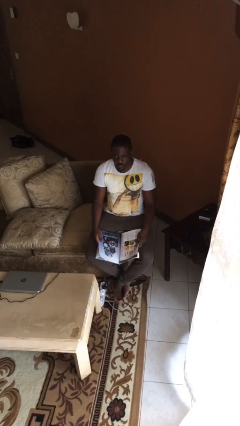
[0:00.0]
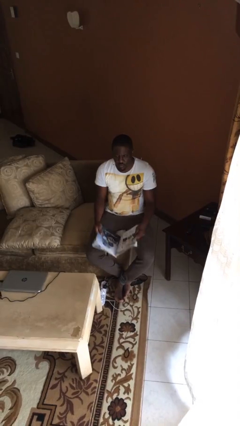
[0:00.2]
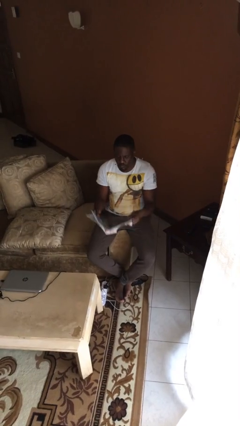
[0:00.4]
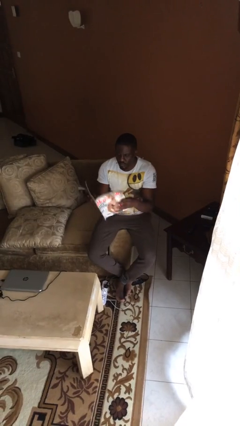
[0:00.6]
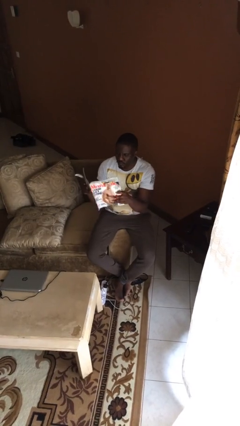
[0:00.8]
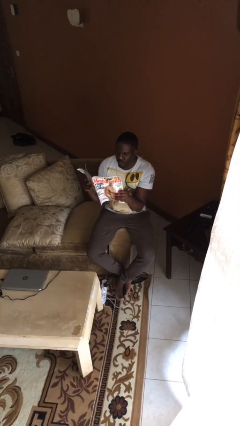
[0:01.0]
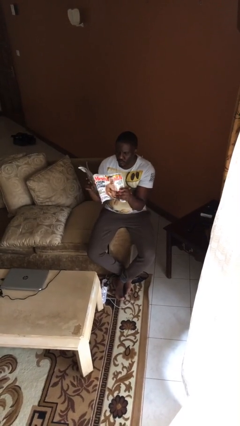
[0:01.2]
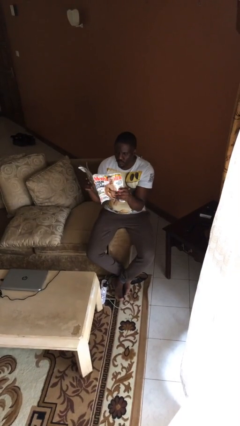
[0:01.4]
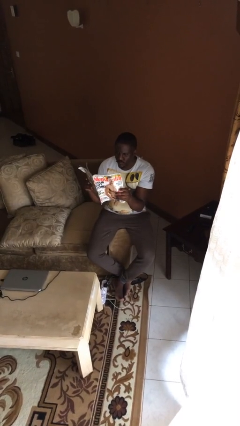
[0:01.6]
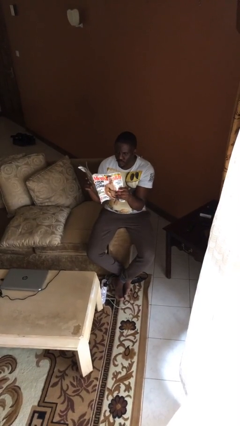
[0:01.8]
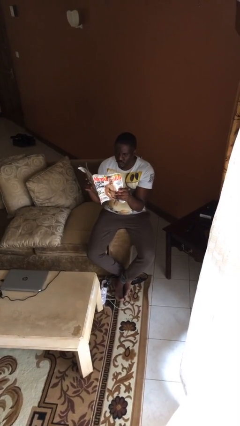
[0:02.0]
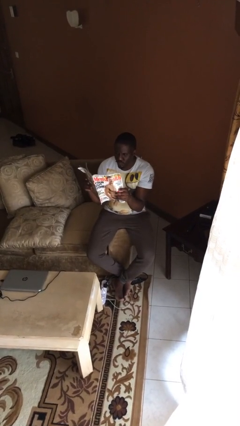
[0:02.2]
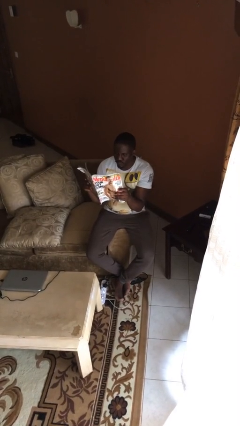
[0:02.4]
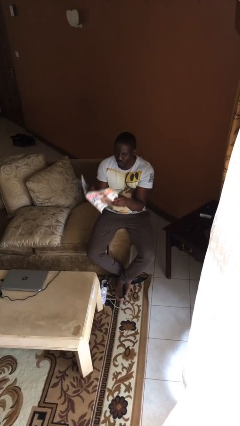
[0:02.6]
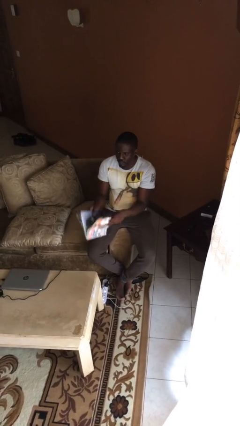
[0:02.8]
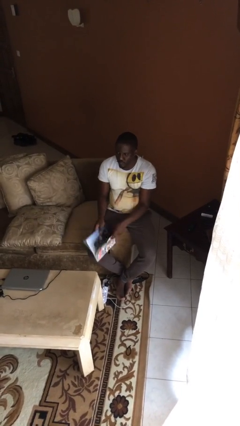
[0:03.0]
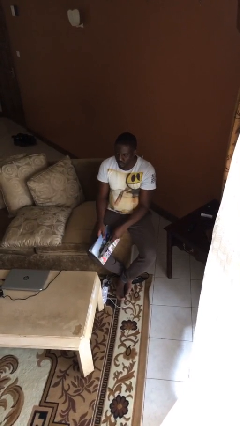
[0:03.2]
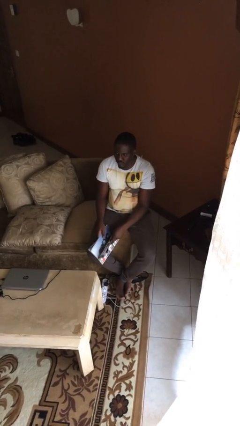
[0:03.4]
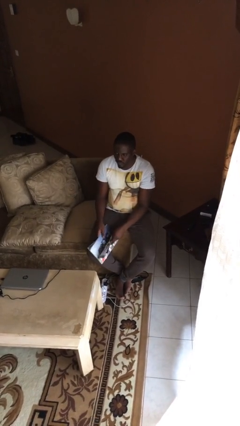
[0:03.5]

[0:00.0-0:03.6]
person reads document

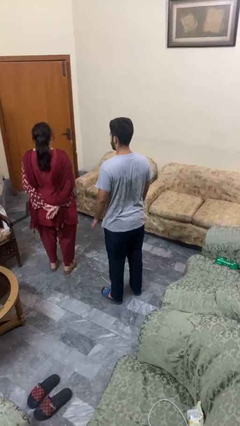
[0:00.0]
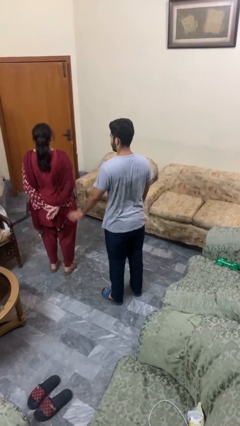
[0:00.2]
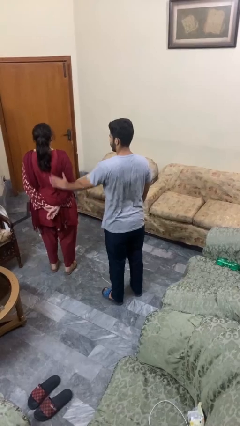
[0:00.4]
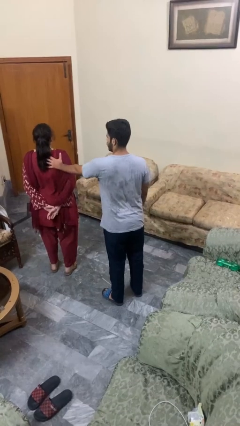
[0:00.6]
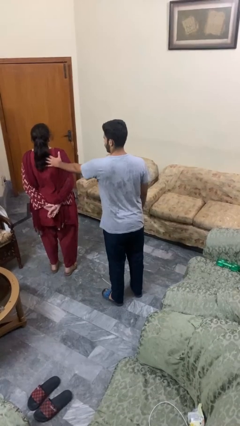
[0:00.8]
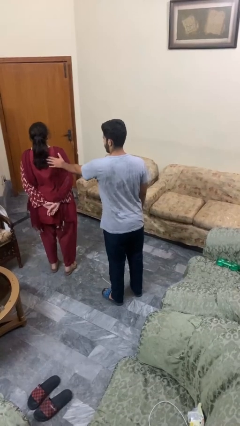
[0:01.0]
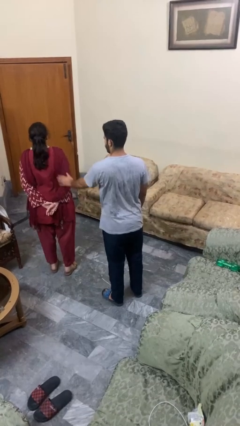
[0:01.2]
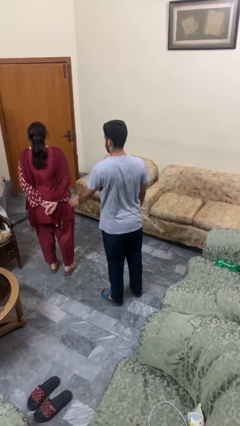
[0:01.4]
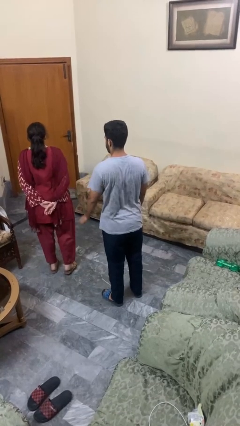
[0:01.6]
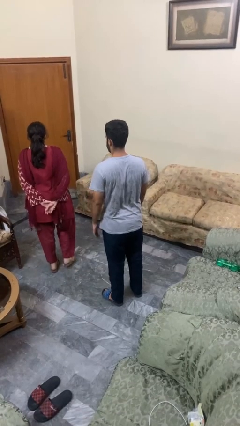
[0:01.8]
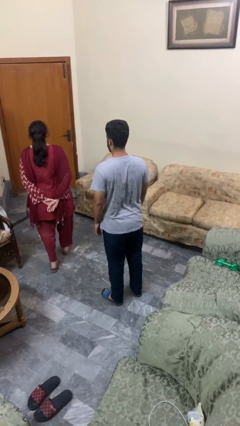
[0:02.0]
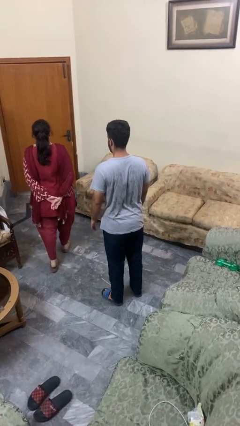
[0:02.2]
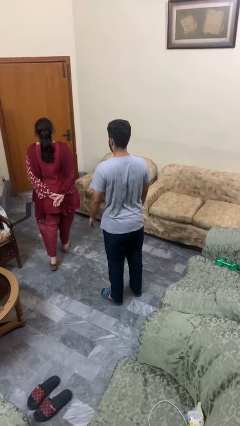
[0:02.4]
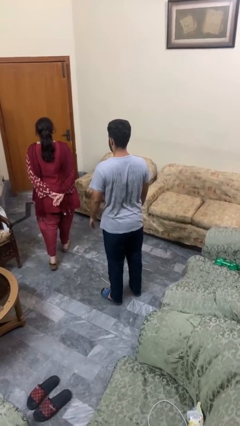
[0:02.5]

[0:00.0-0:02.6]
person shoves person

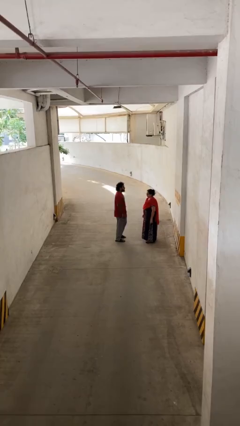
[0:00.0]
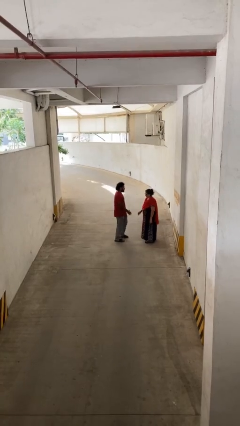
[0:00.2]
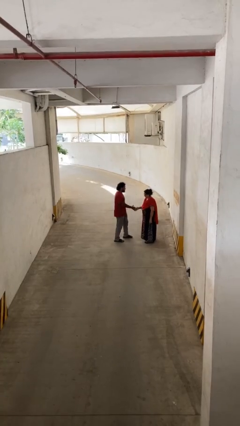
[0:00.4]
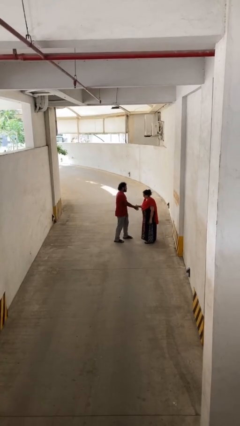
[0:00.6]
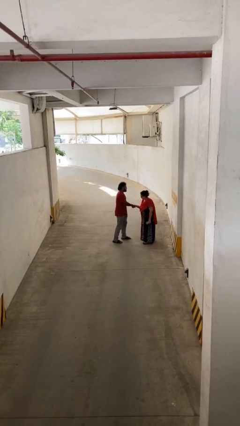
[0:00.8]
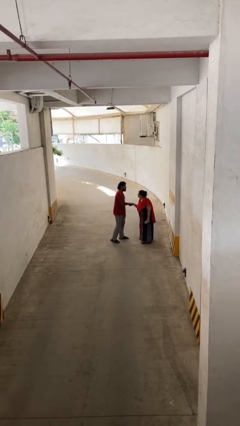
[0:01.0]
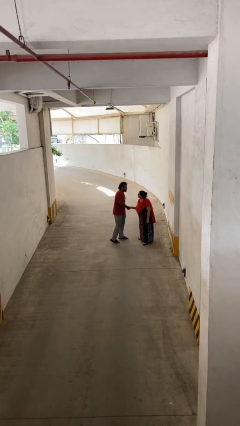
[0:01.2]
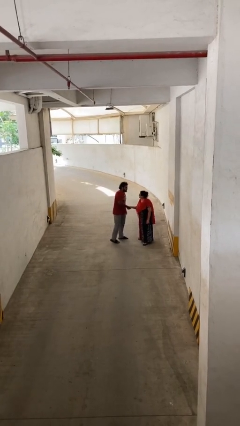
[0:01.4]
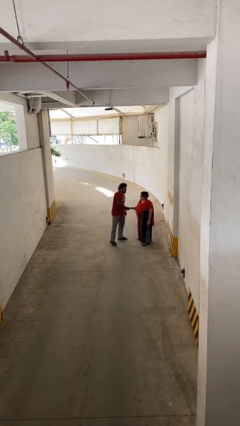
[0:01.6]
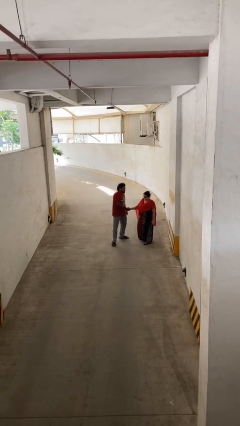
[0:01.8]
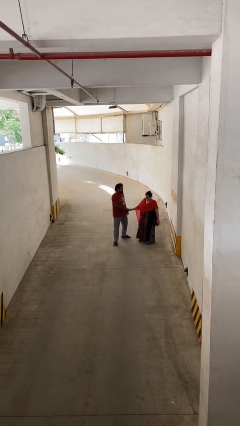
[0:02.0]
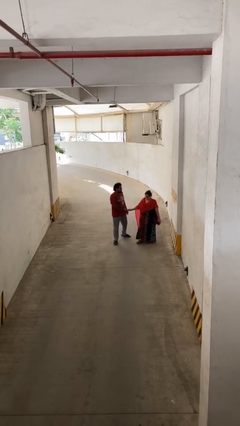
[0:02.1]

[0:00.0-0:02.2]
person shakes hand

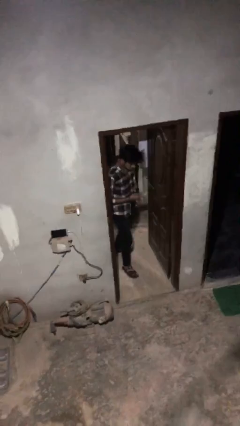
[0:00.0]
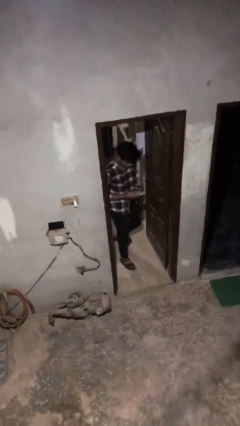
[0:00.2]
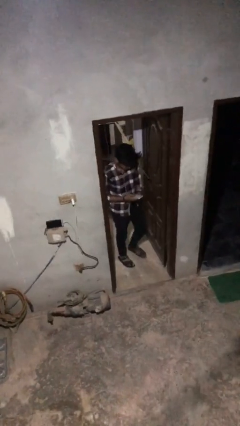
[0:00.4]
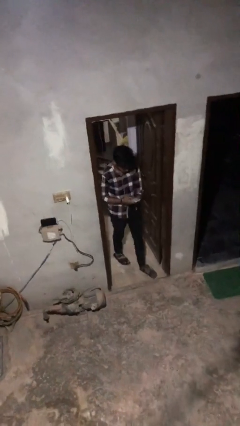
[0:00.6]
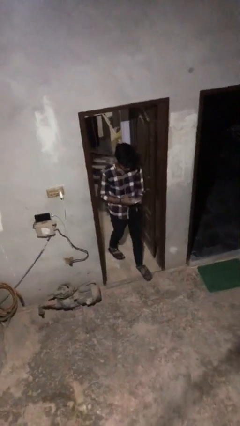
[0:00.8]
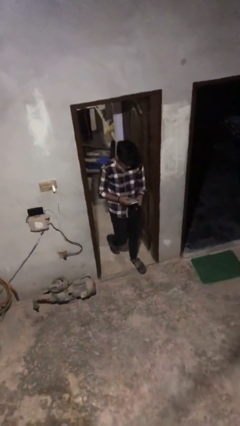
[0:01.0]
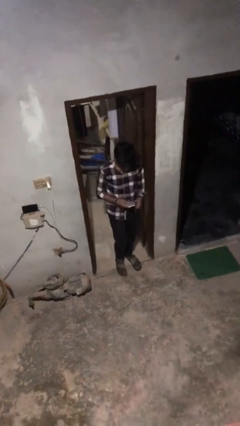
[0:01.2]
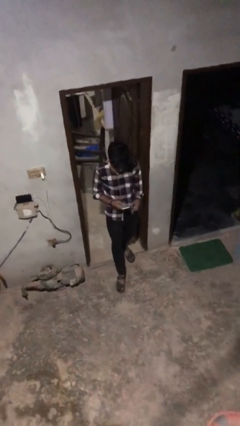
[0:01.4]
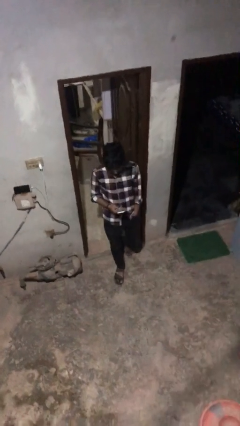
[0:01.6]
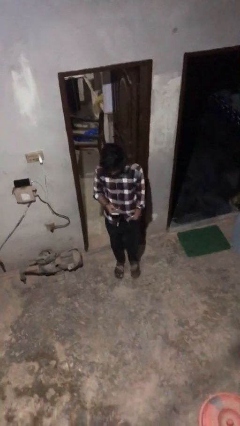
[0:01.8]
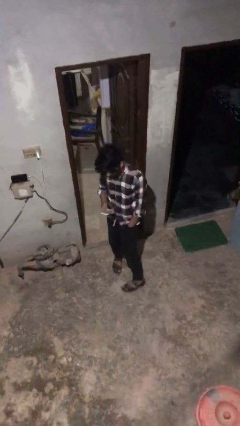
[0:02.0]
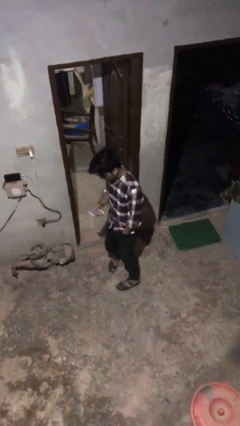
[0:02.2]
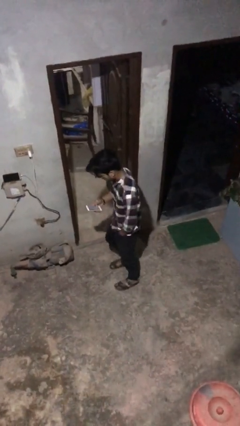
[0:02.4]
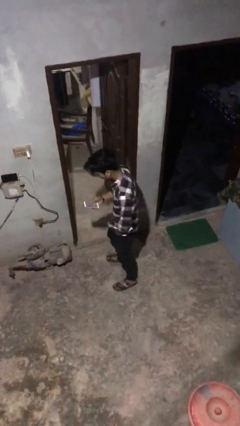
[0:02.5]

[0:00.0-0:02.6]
person enters scene through structure

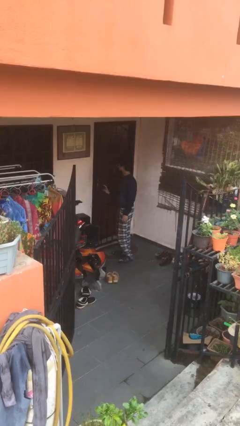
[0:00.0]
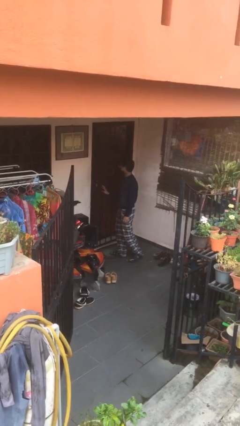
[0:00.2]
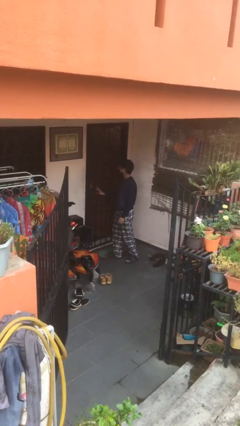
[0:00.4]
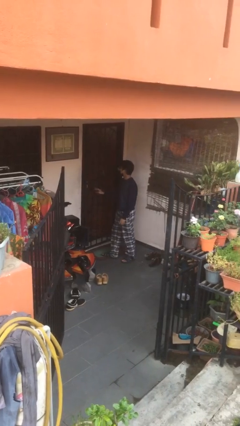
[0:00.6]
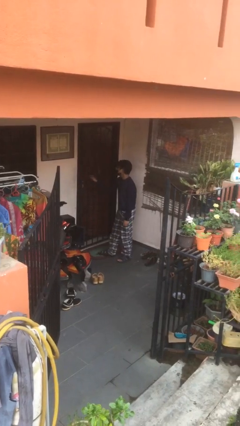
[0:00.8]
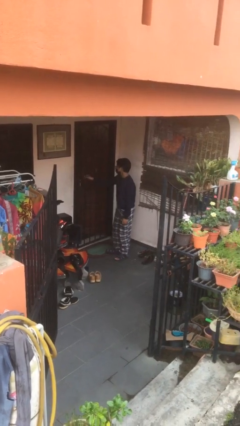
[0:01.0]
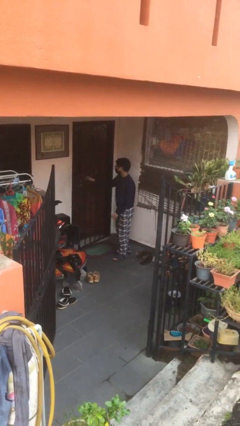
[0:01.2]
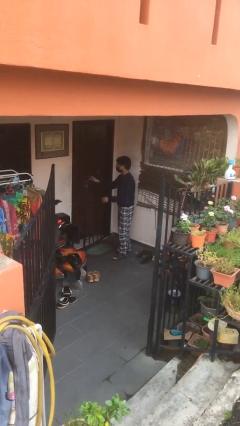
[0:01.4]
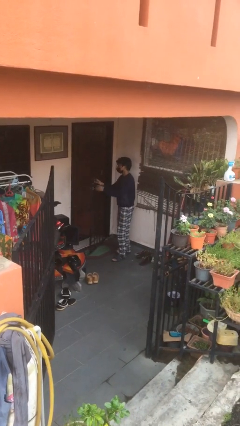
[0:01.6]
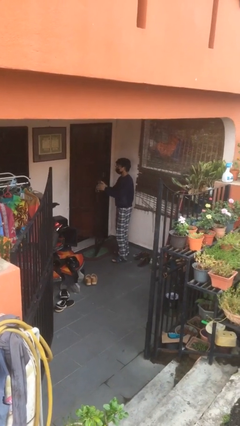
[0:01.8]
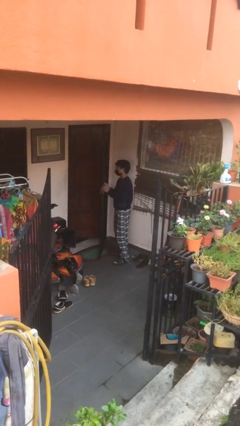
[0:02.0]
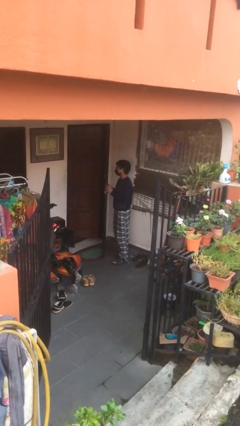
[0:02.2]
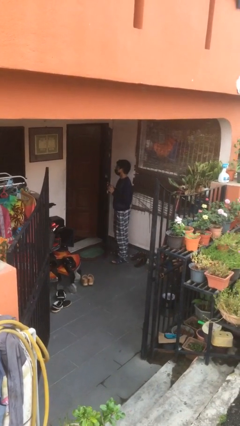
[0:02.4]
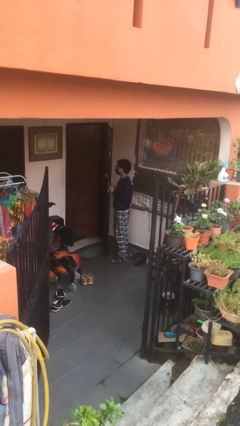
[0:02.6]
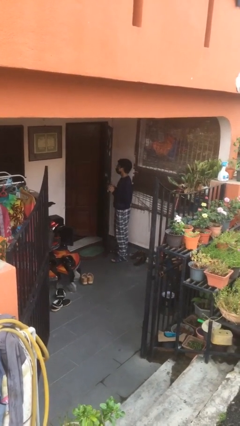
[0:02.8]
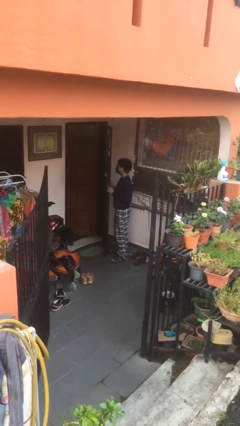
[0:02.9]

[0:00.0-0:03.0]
person opens facility door

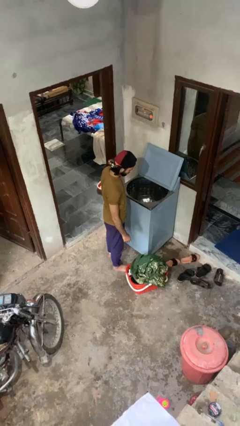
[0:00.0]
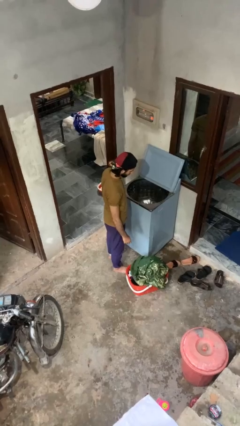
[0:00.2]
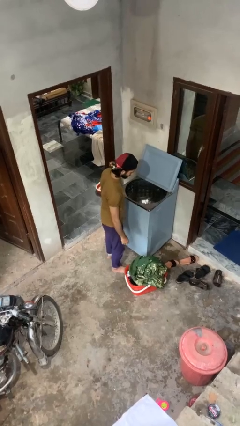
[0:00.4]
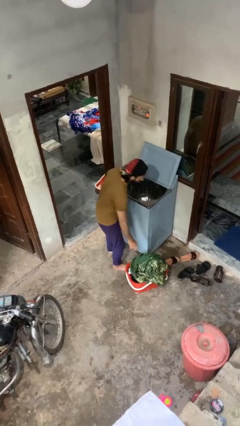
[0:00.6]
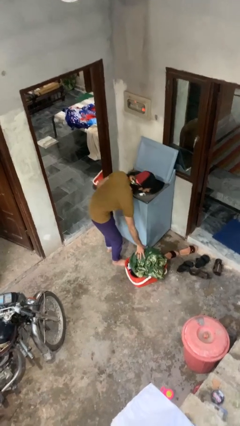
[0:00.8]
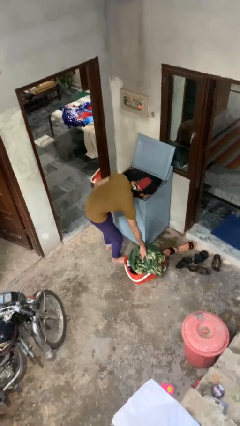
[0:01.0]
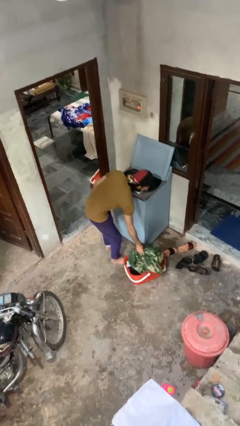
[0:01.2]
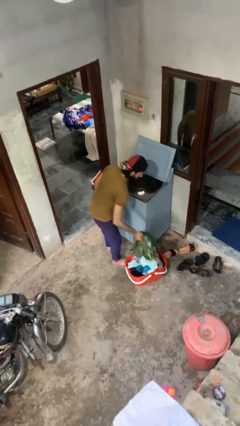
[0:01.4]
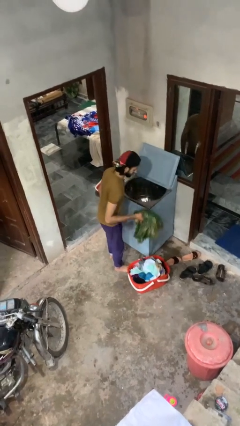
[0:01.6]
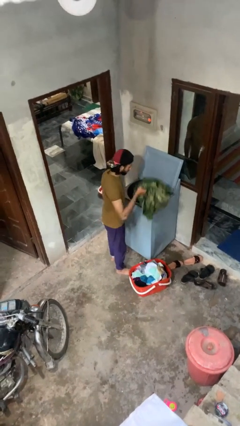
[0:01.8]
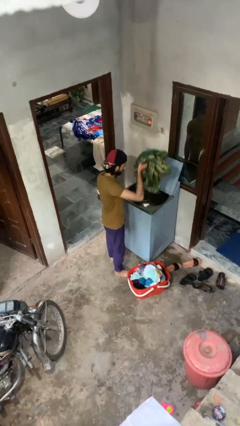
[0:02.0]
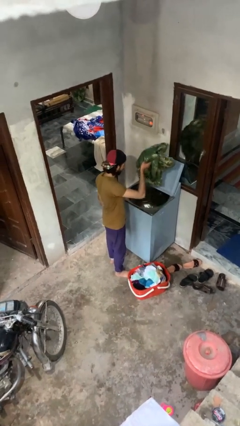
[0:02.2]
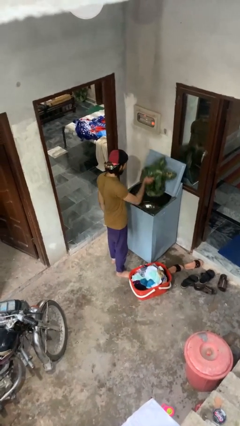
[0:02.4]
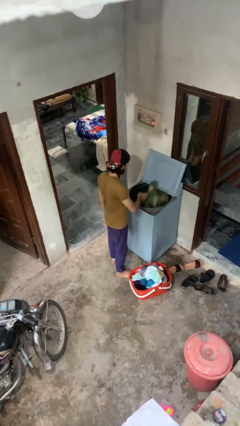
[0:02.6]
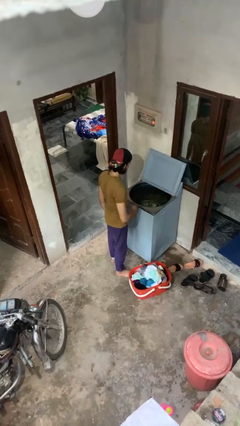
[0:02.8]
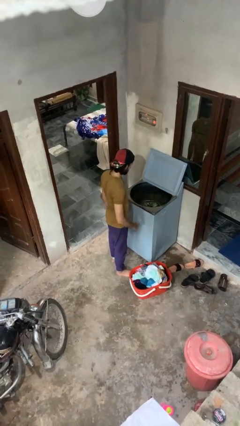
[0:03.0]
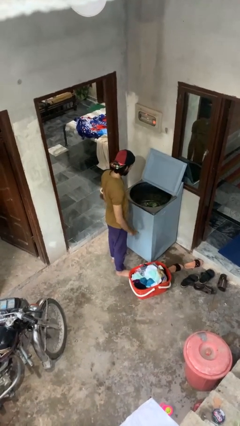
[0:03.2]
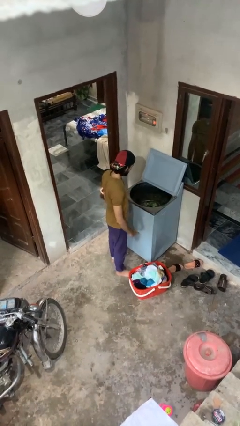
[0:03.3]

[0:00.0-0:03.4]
person loads clotheswasher
